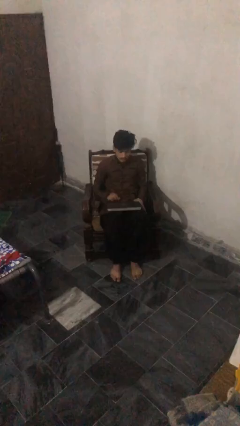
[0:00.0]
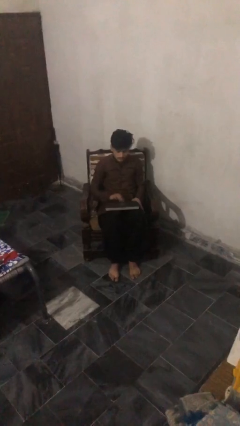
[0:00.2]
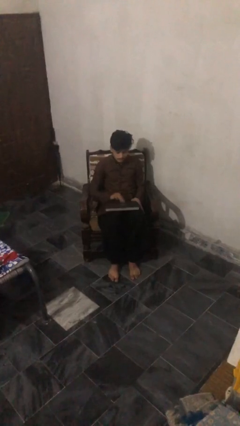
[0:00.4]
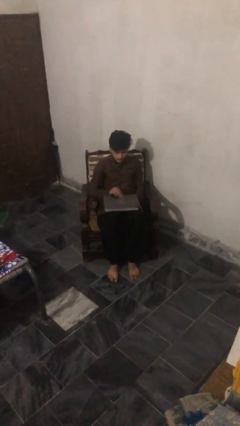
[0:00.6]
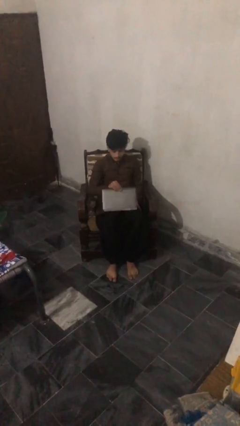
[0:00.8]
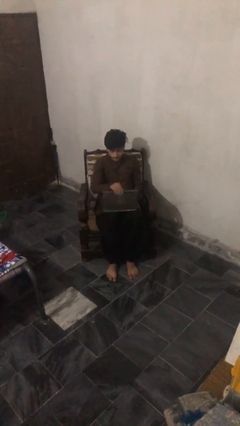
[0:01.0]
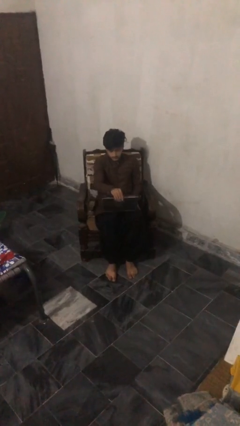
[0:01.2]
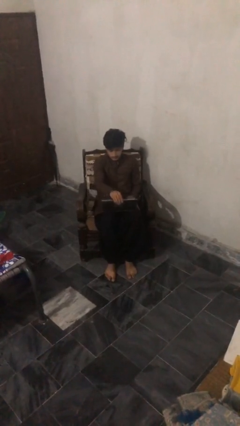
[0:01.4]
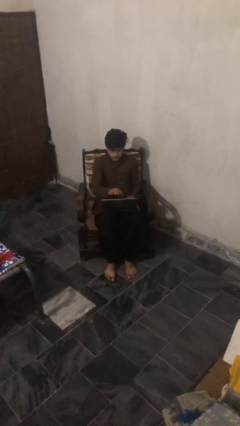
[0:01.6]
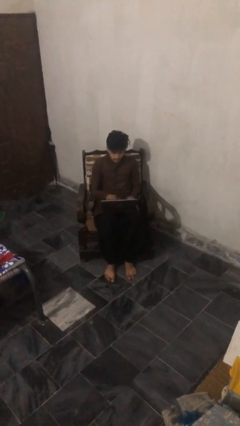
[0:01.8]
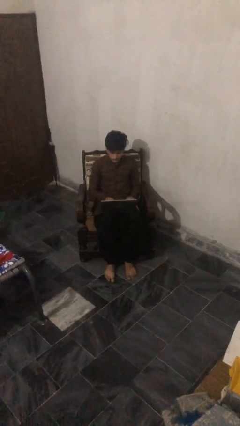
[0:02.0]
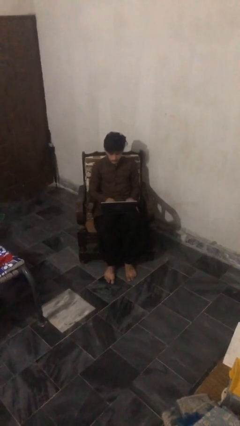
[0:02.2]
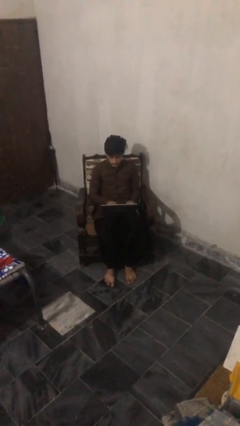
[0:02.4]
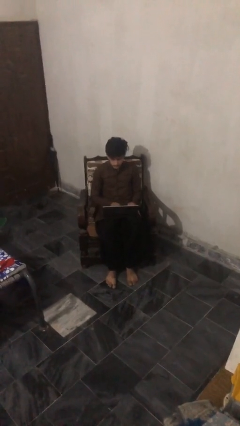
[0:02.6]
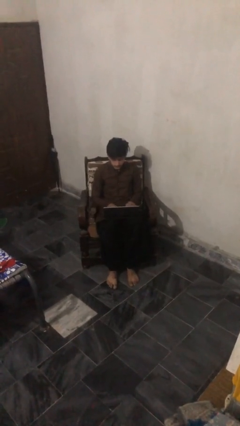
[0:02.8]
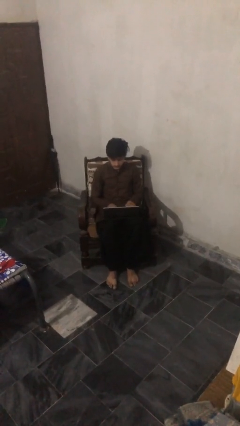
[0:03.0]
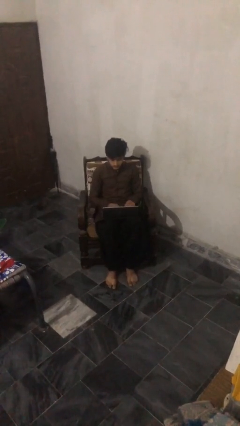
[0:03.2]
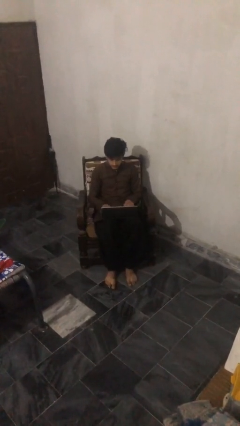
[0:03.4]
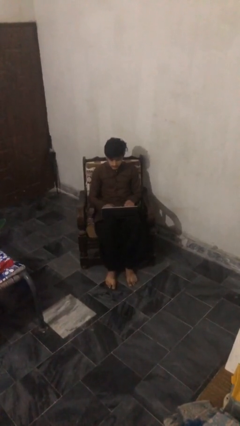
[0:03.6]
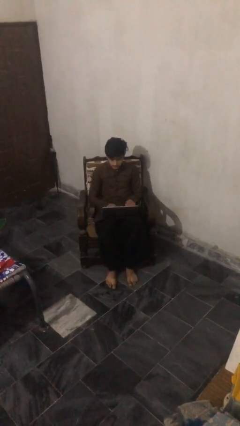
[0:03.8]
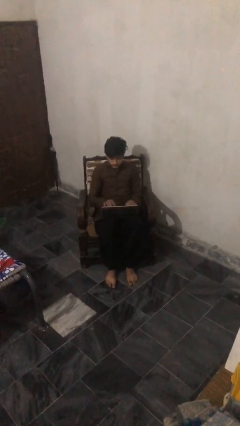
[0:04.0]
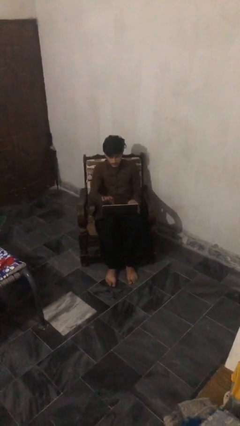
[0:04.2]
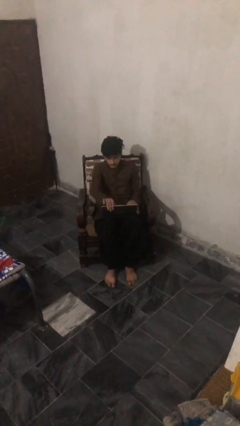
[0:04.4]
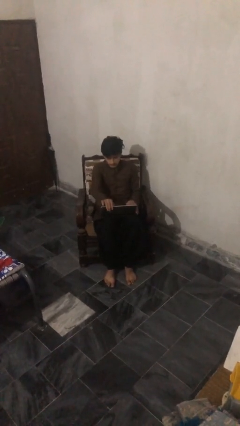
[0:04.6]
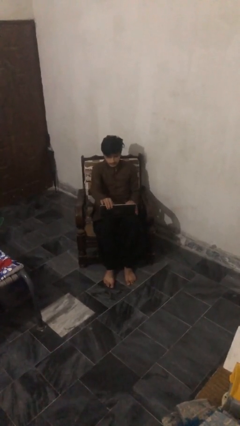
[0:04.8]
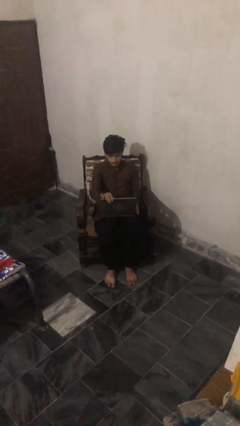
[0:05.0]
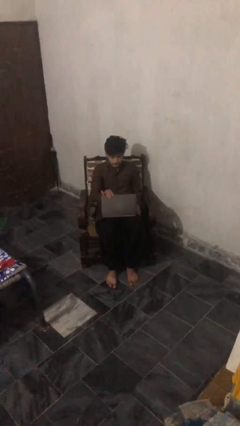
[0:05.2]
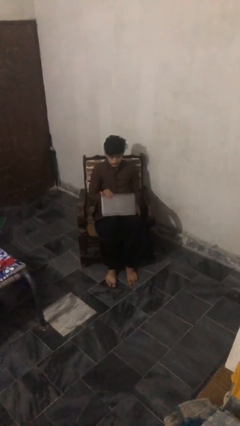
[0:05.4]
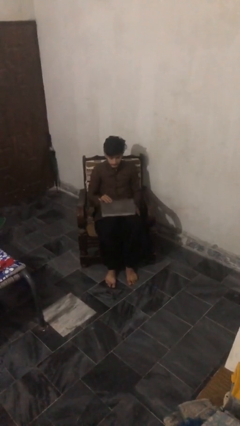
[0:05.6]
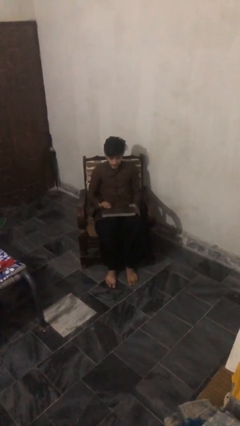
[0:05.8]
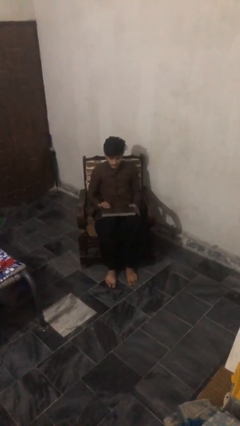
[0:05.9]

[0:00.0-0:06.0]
person interacts with laptop

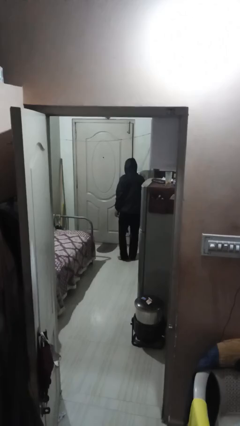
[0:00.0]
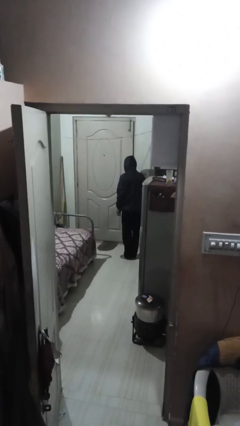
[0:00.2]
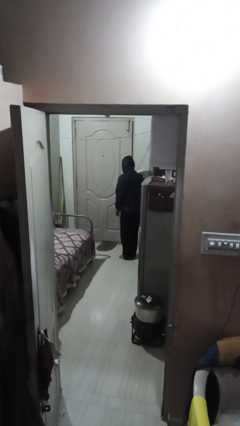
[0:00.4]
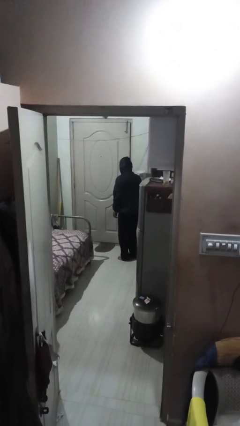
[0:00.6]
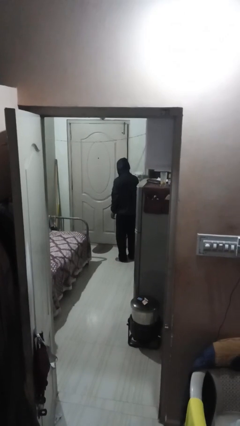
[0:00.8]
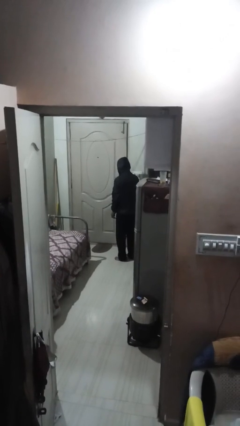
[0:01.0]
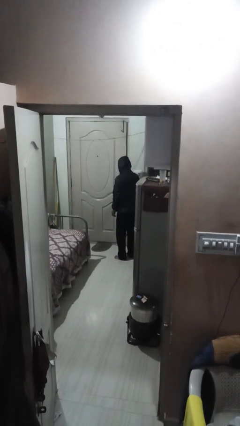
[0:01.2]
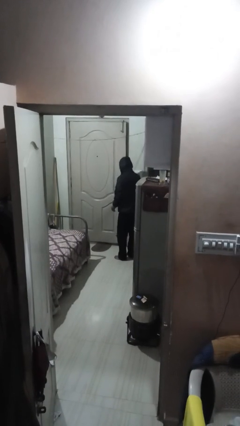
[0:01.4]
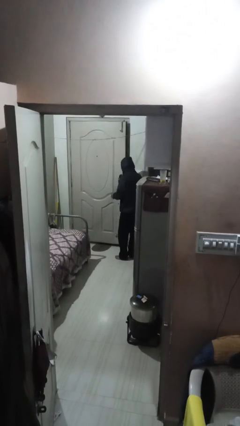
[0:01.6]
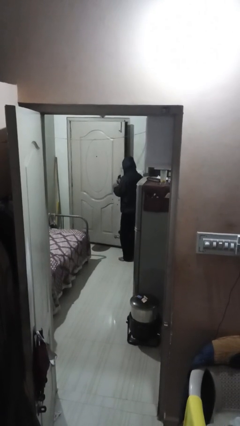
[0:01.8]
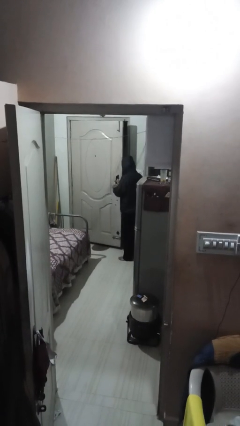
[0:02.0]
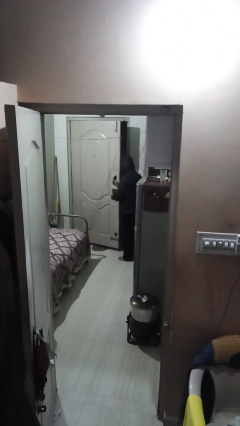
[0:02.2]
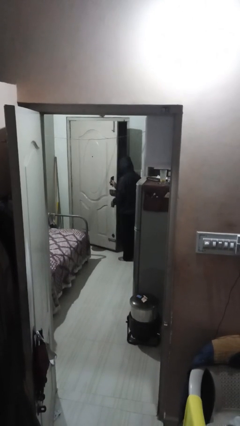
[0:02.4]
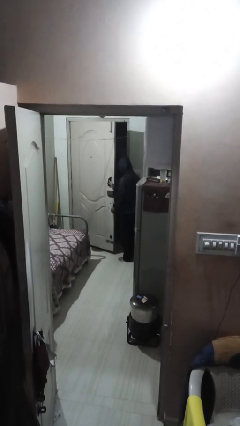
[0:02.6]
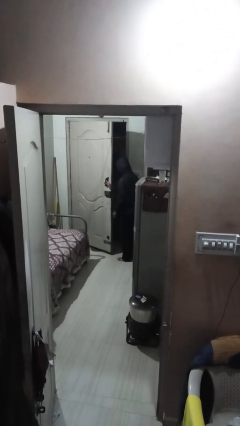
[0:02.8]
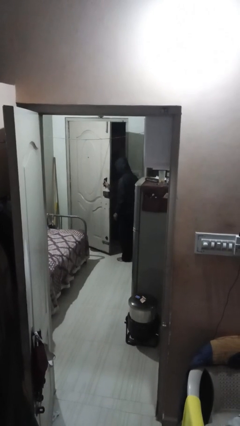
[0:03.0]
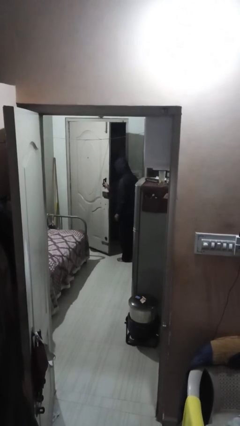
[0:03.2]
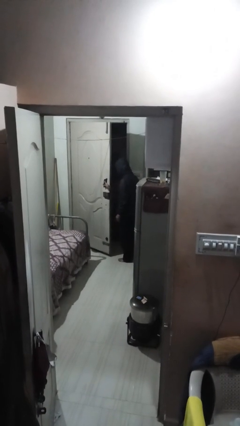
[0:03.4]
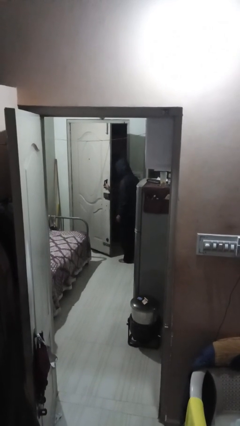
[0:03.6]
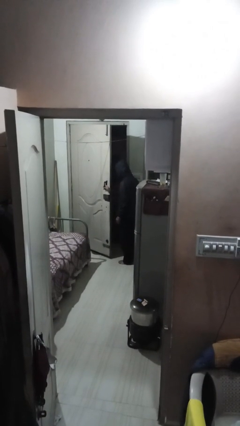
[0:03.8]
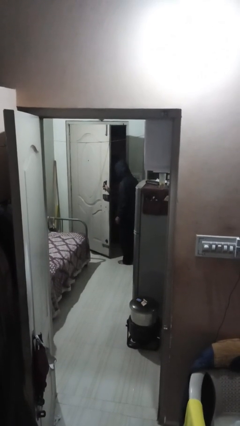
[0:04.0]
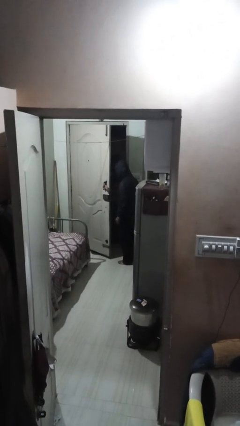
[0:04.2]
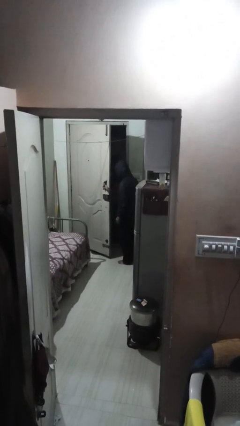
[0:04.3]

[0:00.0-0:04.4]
person opens facility door

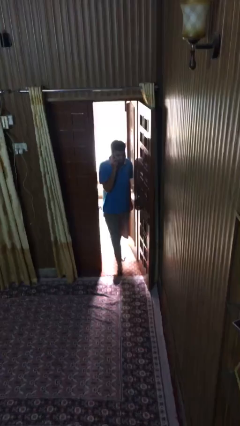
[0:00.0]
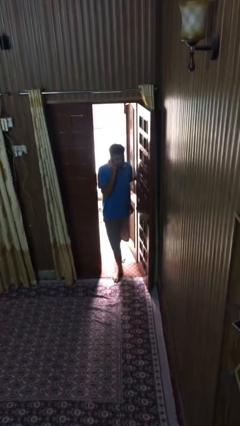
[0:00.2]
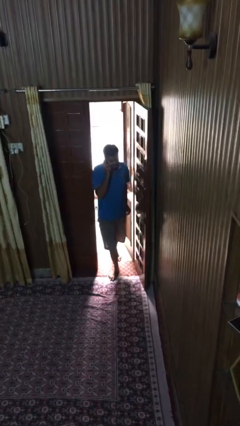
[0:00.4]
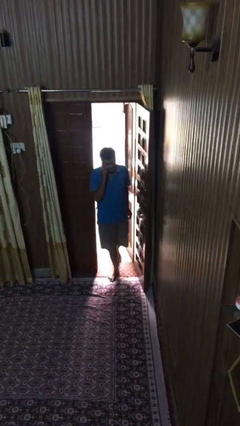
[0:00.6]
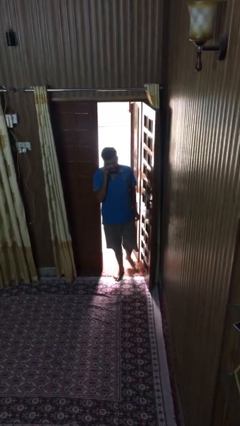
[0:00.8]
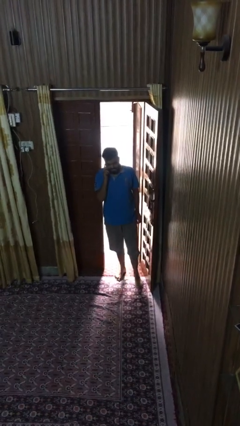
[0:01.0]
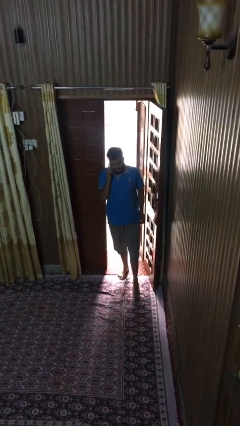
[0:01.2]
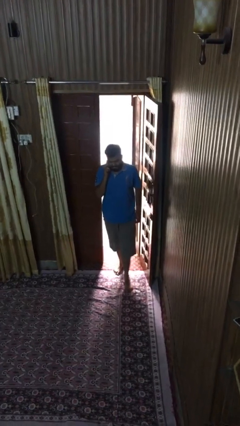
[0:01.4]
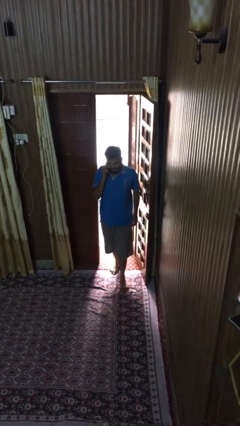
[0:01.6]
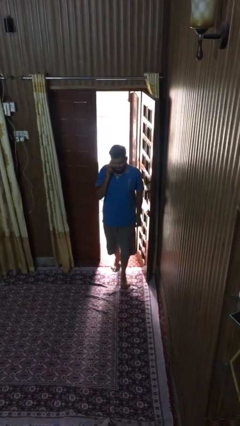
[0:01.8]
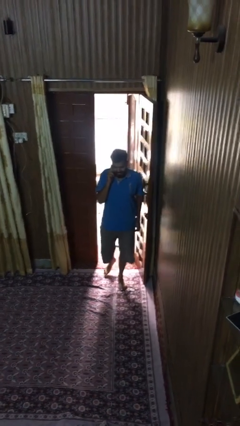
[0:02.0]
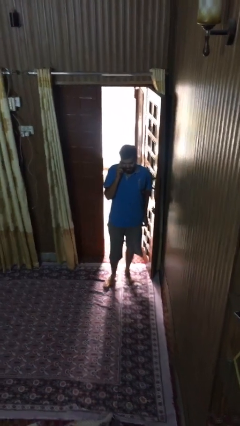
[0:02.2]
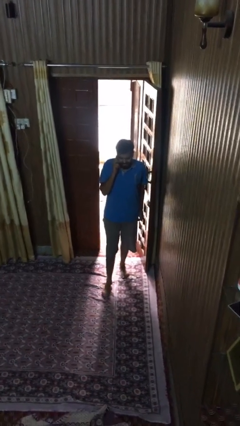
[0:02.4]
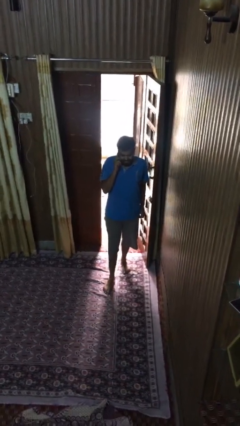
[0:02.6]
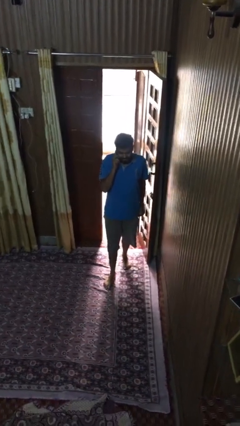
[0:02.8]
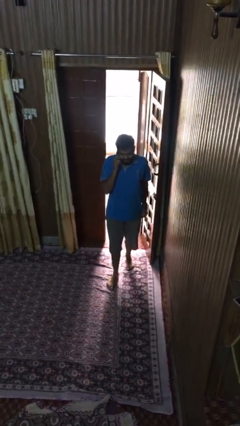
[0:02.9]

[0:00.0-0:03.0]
person enters scene through structure

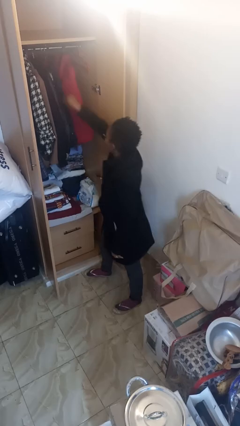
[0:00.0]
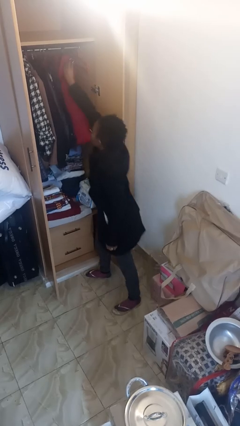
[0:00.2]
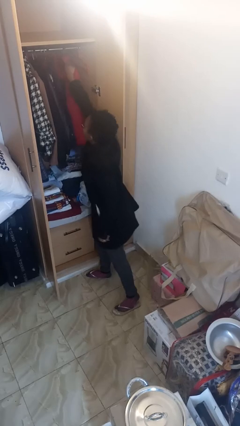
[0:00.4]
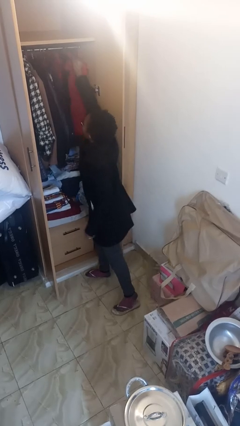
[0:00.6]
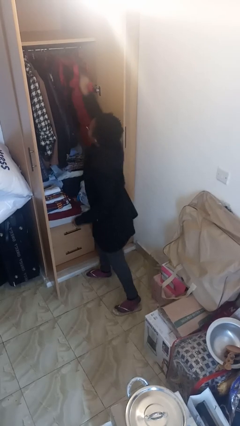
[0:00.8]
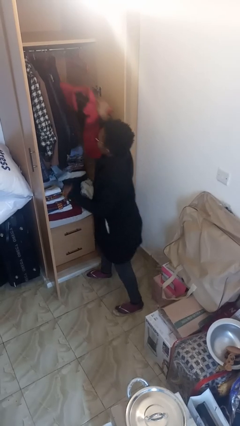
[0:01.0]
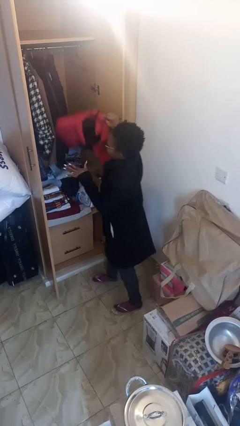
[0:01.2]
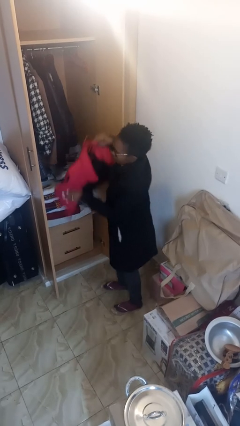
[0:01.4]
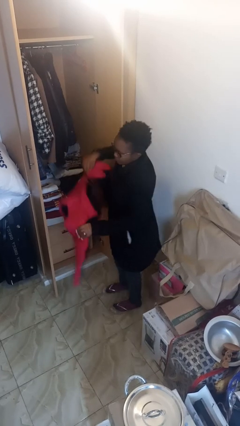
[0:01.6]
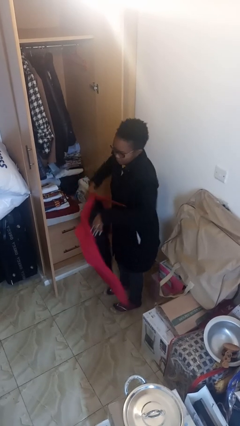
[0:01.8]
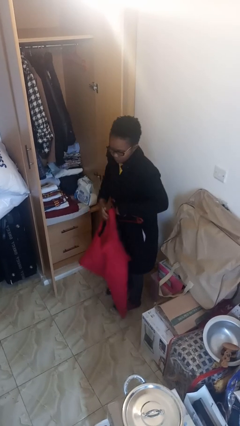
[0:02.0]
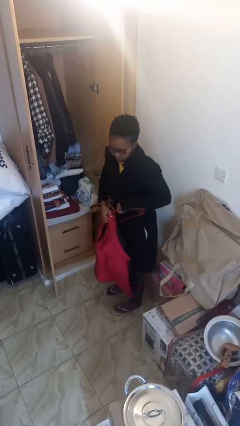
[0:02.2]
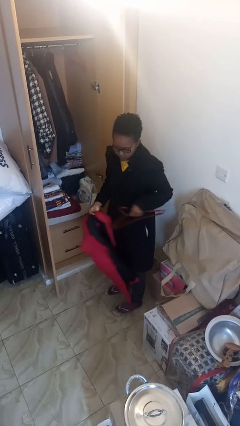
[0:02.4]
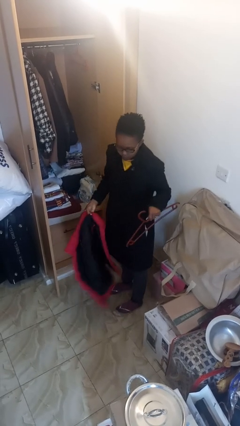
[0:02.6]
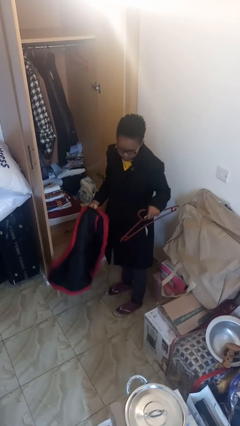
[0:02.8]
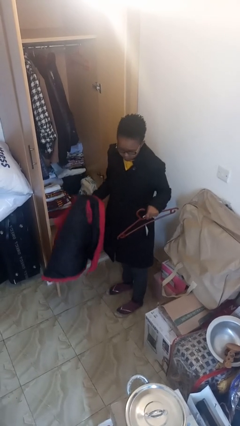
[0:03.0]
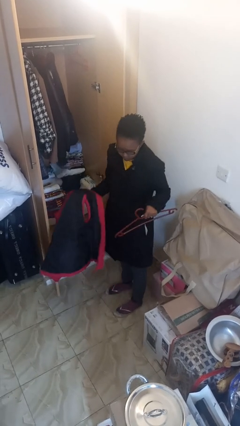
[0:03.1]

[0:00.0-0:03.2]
person takes clothes from closet

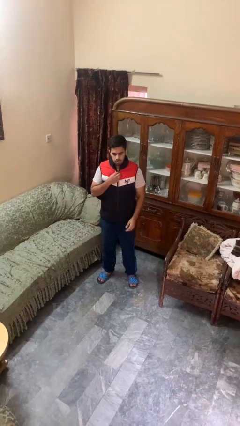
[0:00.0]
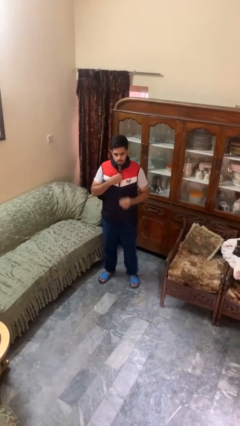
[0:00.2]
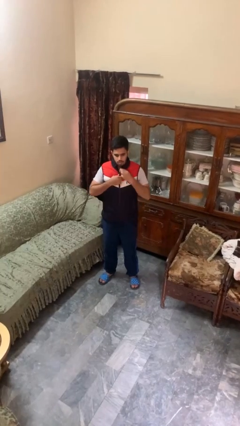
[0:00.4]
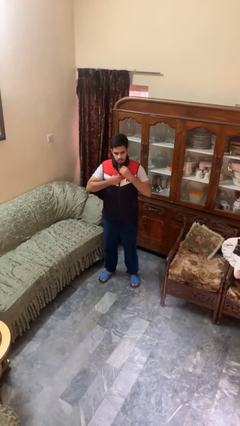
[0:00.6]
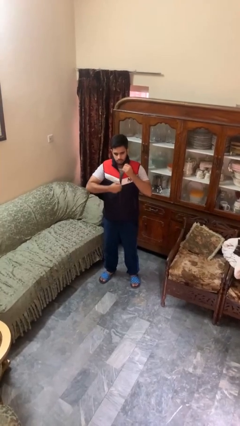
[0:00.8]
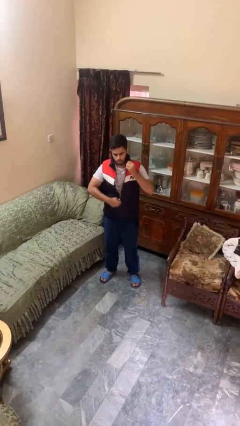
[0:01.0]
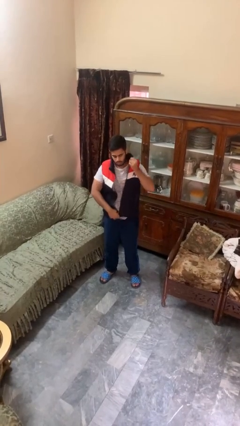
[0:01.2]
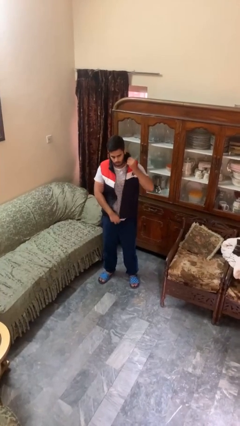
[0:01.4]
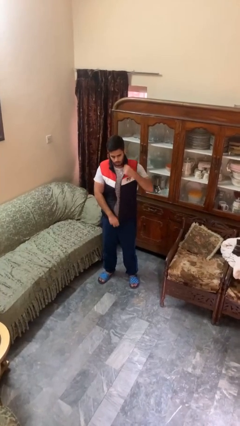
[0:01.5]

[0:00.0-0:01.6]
person unzips jacket
